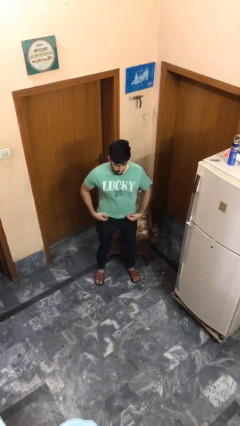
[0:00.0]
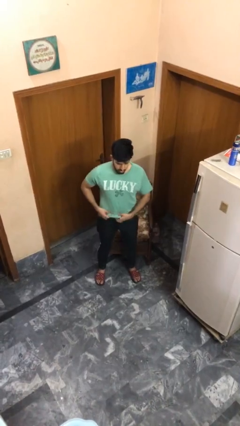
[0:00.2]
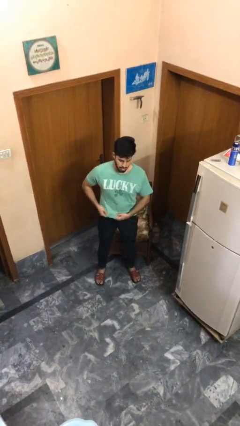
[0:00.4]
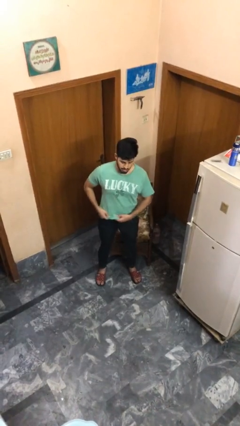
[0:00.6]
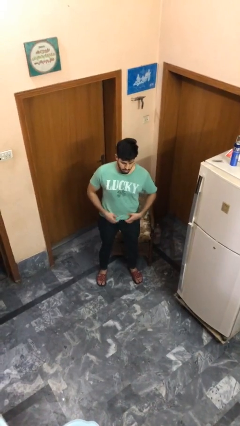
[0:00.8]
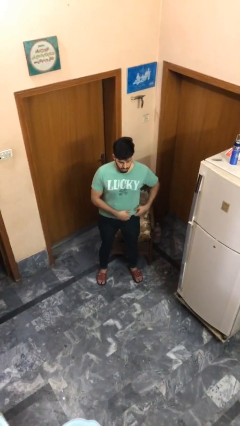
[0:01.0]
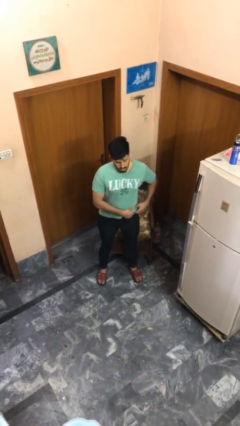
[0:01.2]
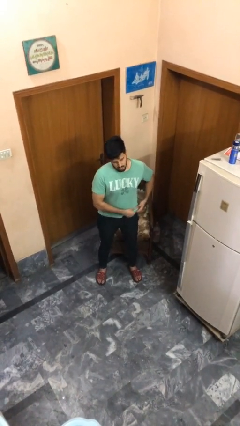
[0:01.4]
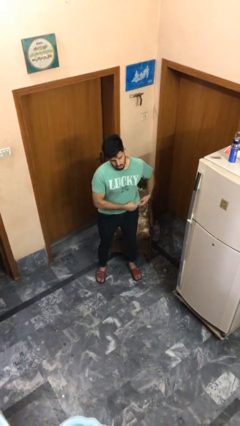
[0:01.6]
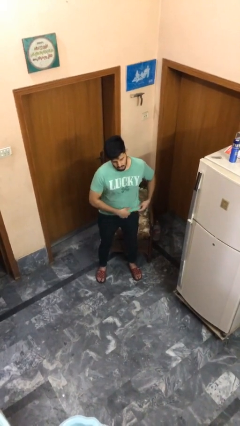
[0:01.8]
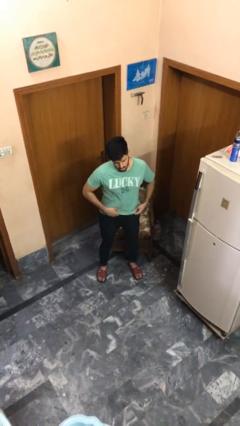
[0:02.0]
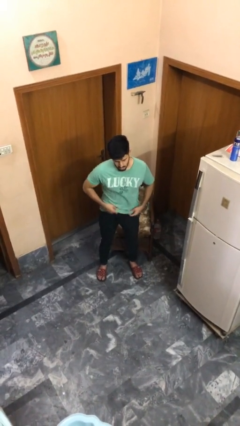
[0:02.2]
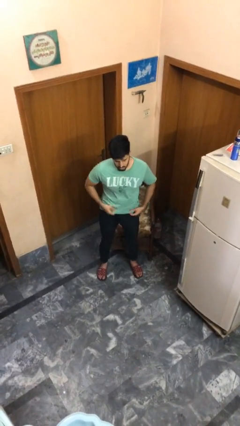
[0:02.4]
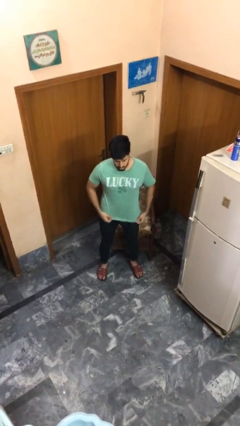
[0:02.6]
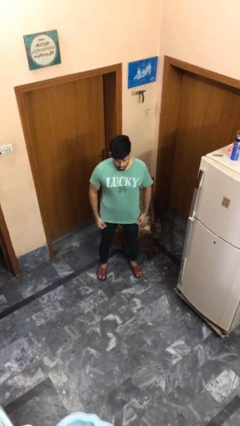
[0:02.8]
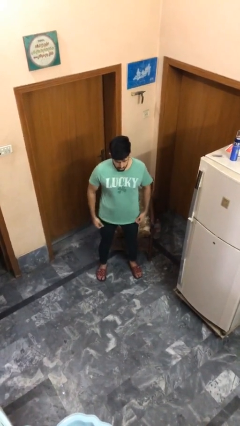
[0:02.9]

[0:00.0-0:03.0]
person hikes up pants

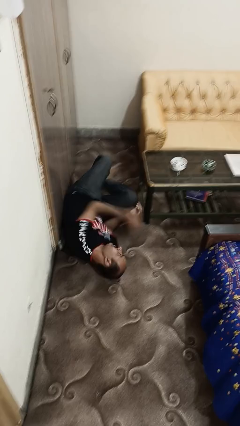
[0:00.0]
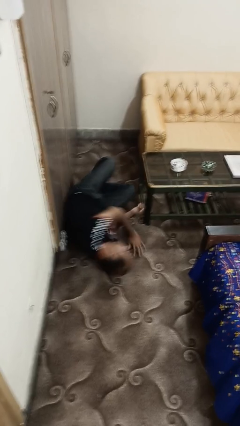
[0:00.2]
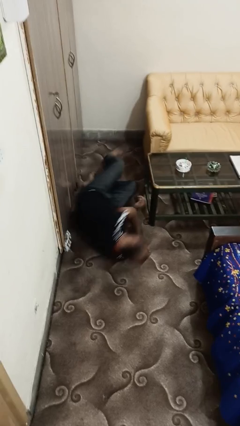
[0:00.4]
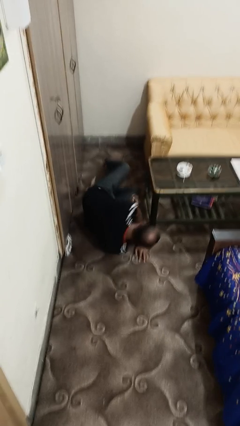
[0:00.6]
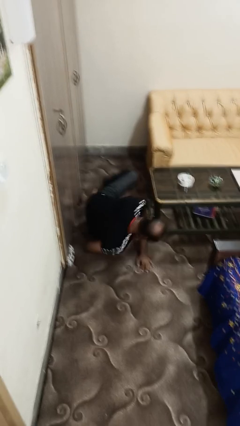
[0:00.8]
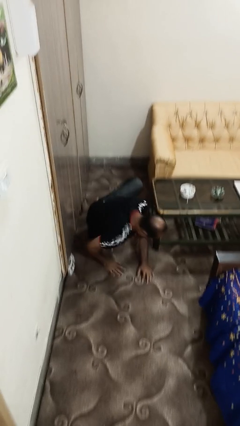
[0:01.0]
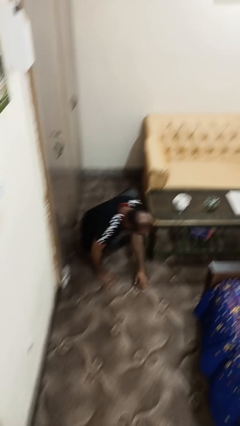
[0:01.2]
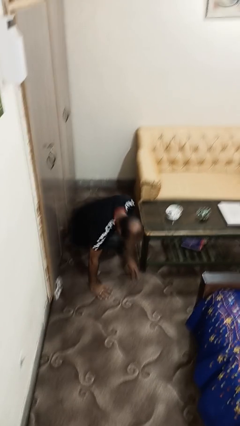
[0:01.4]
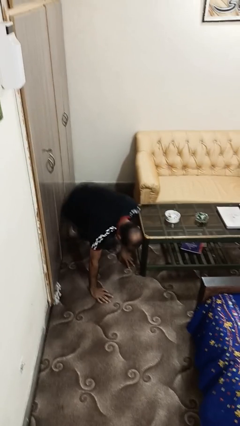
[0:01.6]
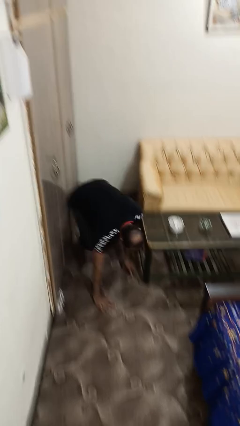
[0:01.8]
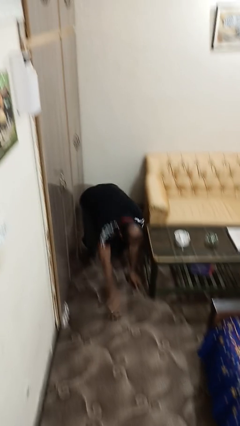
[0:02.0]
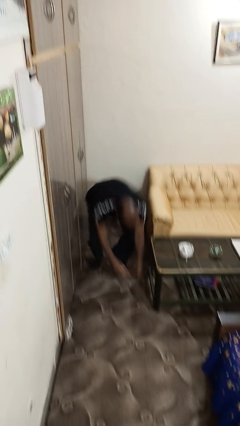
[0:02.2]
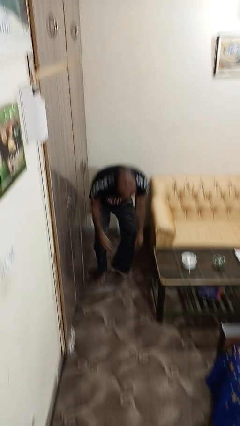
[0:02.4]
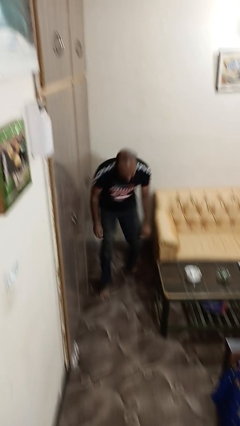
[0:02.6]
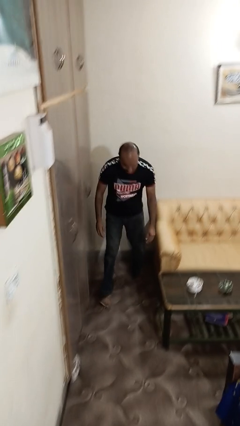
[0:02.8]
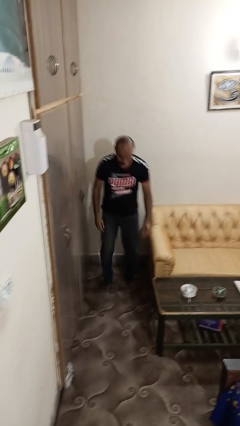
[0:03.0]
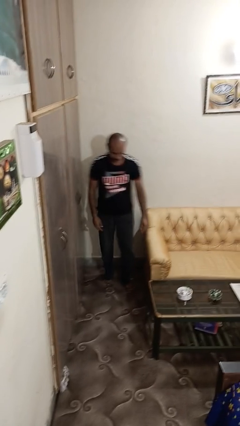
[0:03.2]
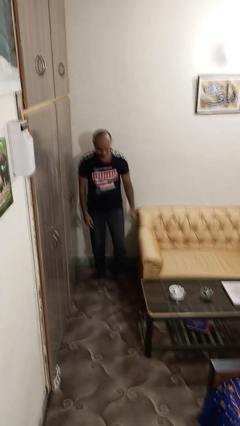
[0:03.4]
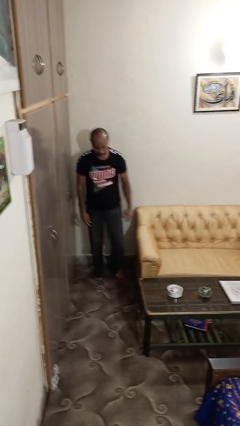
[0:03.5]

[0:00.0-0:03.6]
person stands up from floor

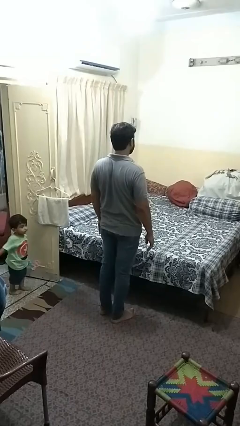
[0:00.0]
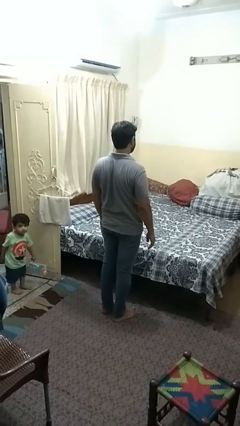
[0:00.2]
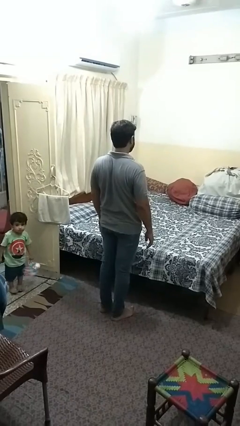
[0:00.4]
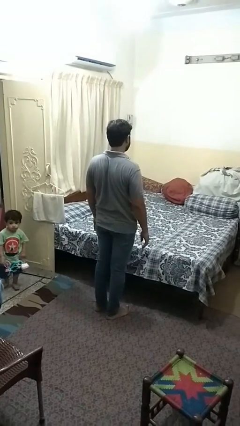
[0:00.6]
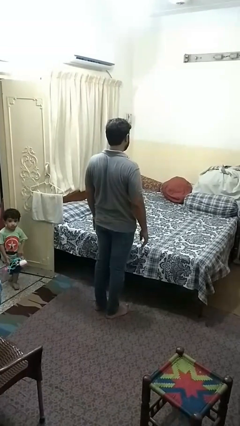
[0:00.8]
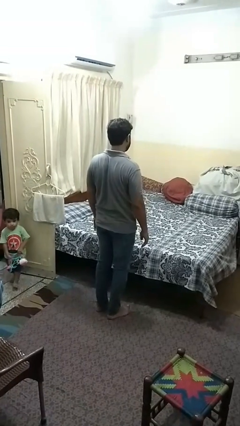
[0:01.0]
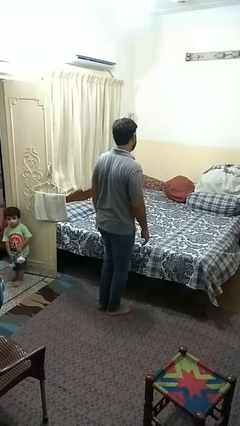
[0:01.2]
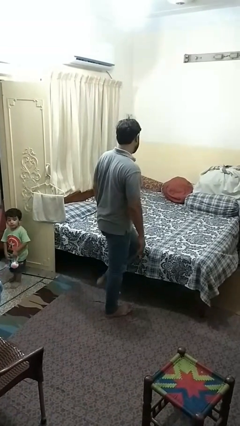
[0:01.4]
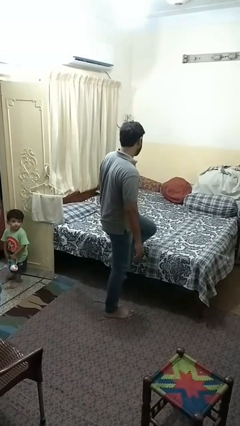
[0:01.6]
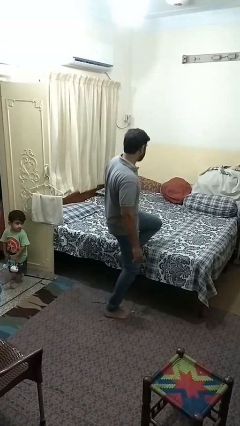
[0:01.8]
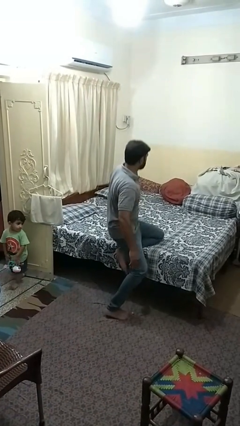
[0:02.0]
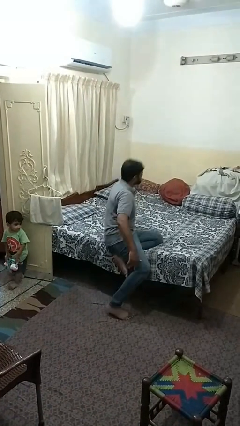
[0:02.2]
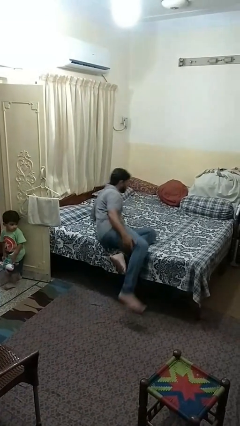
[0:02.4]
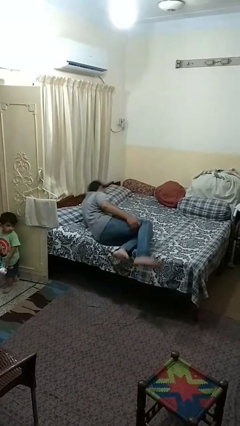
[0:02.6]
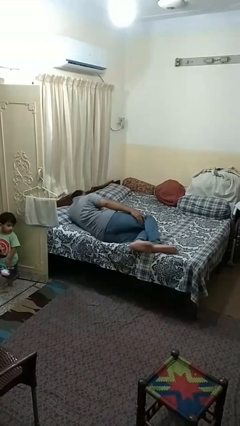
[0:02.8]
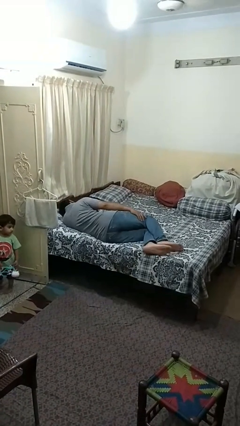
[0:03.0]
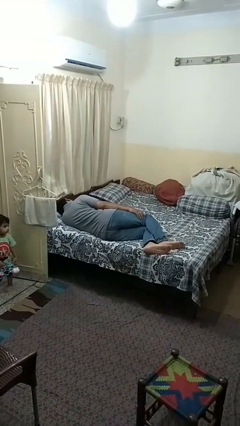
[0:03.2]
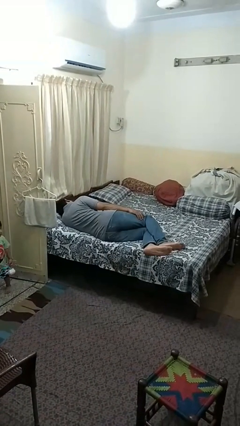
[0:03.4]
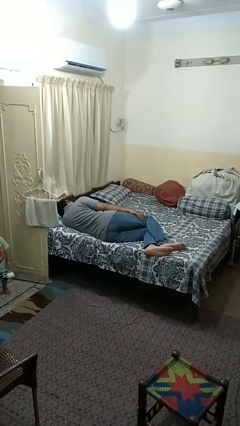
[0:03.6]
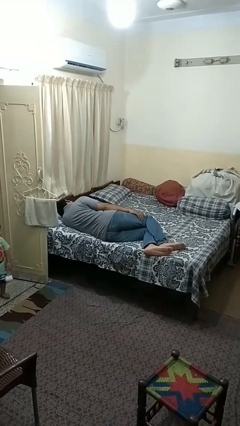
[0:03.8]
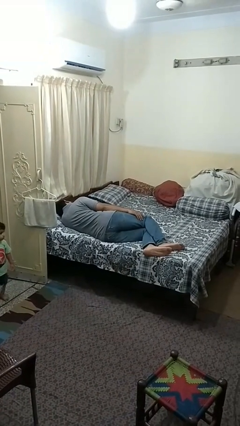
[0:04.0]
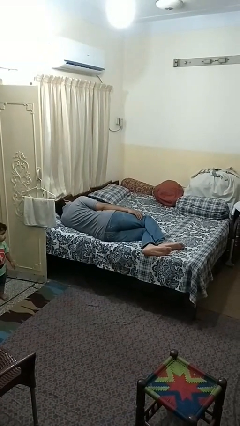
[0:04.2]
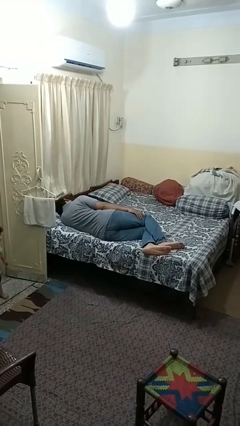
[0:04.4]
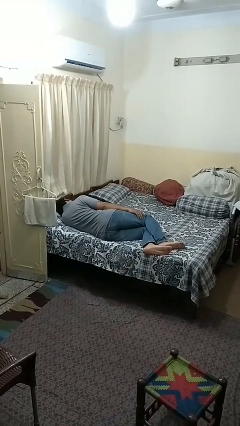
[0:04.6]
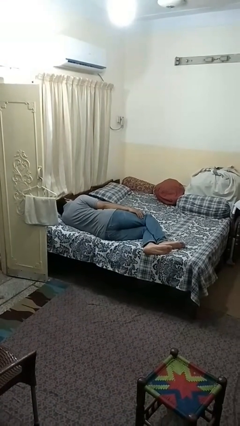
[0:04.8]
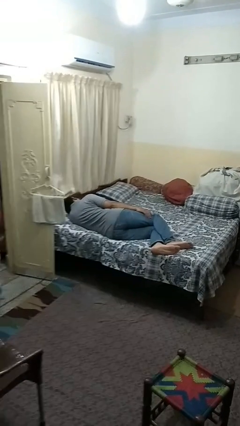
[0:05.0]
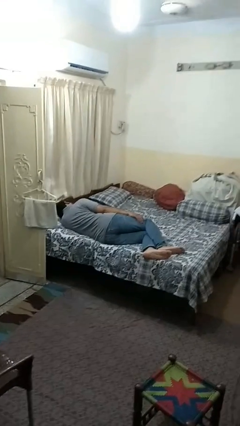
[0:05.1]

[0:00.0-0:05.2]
person lies down on bed

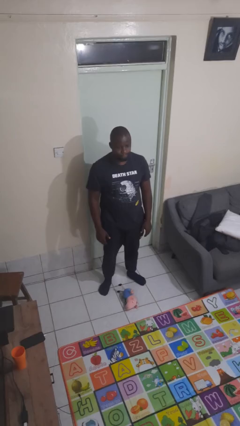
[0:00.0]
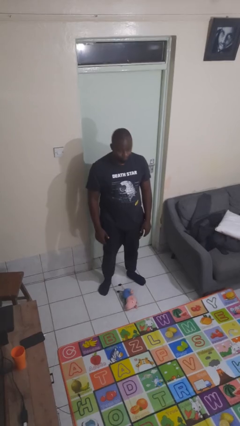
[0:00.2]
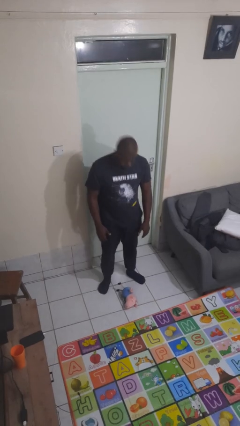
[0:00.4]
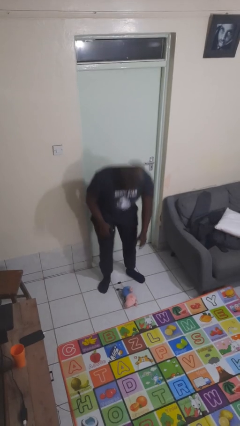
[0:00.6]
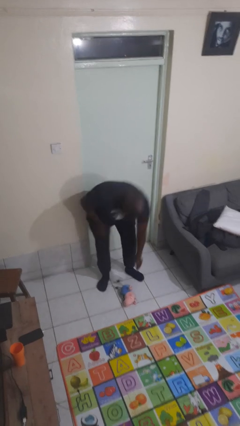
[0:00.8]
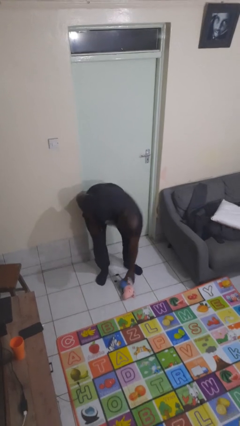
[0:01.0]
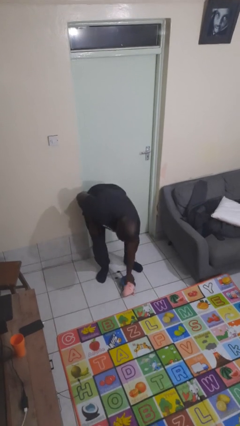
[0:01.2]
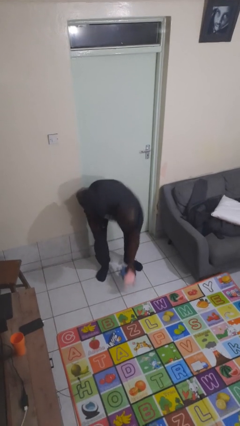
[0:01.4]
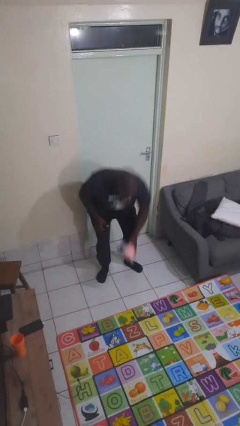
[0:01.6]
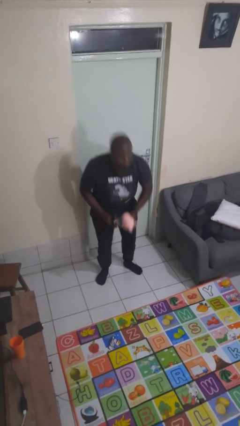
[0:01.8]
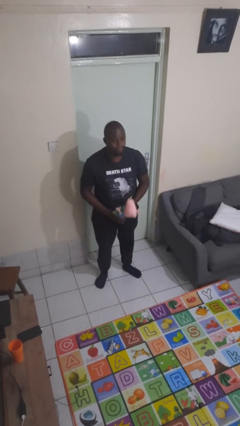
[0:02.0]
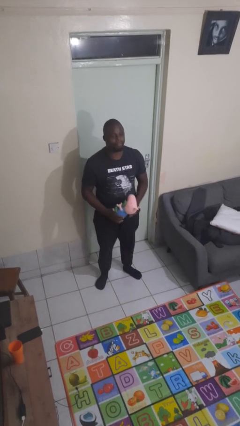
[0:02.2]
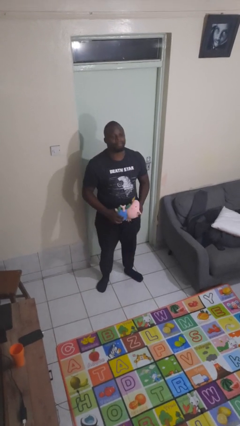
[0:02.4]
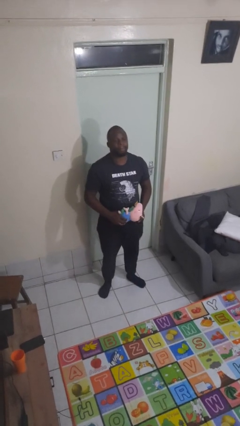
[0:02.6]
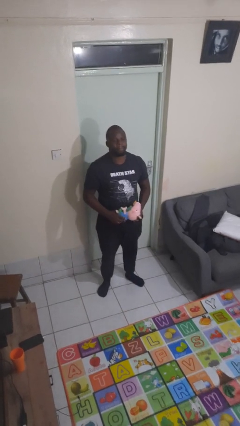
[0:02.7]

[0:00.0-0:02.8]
person picks up object from floor

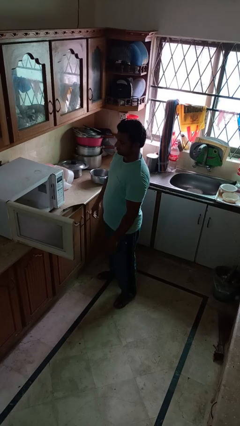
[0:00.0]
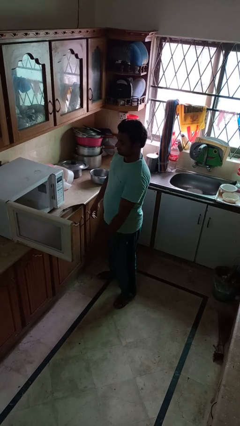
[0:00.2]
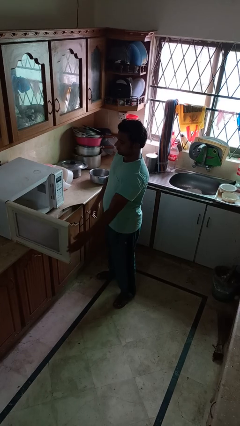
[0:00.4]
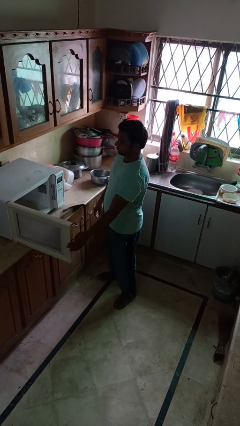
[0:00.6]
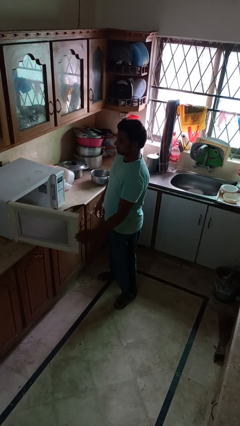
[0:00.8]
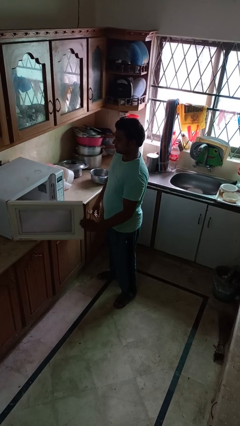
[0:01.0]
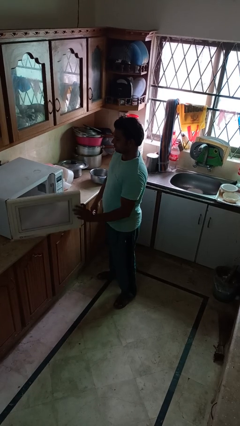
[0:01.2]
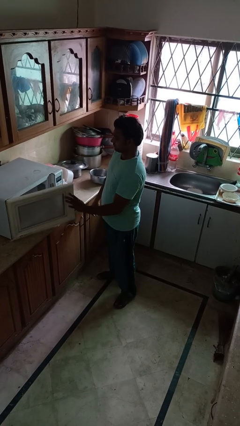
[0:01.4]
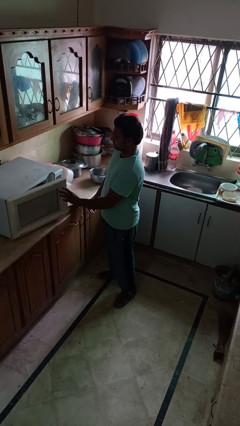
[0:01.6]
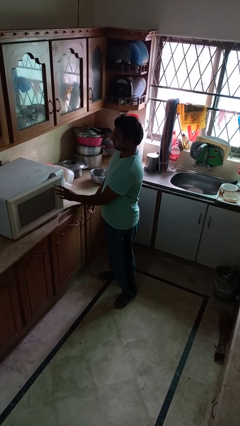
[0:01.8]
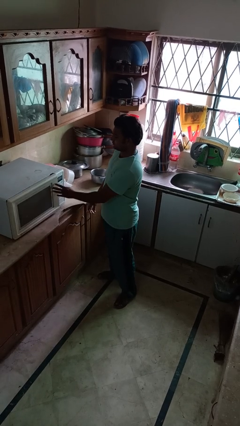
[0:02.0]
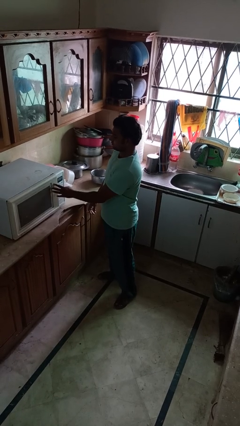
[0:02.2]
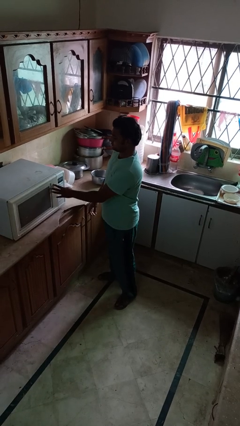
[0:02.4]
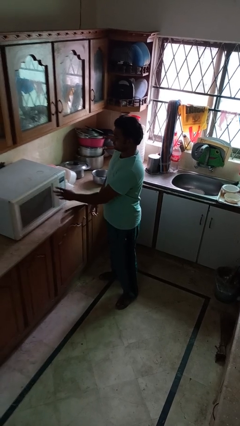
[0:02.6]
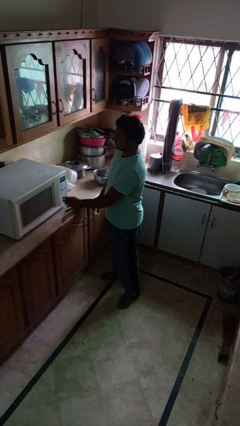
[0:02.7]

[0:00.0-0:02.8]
person closes microwave

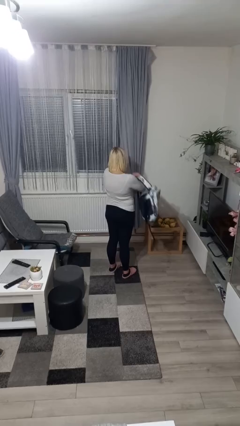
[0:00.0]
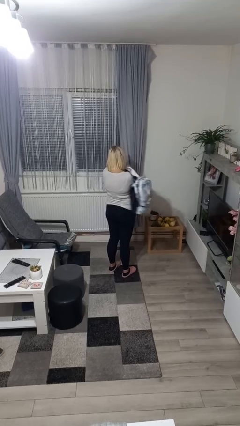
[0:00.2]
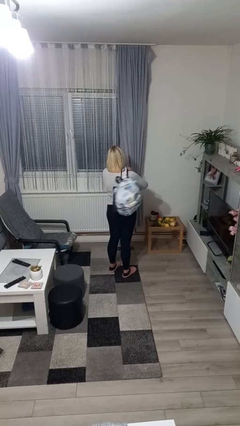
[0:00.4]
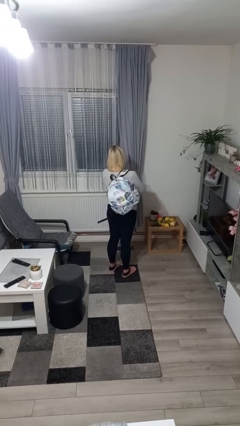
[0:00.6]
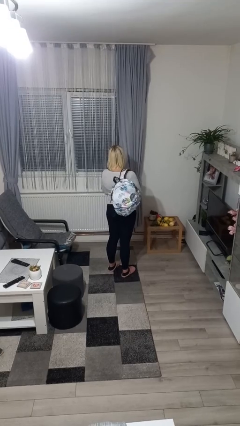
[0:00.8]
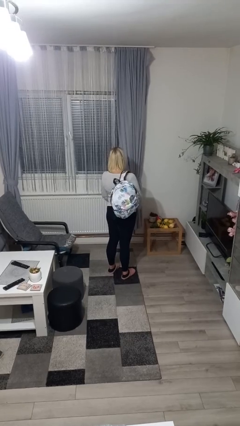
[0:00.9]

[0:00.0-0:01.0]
person puts on backpack
